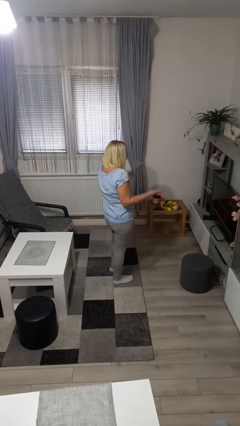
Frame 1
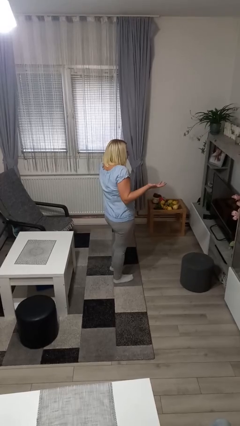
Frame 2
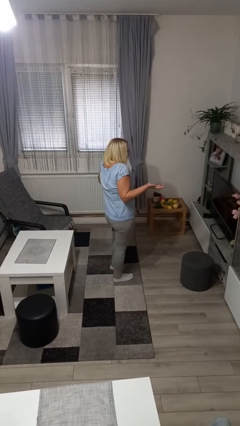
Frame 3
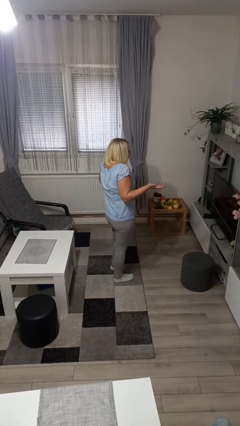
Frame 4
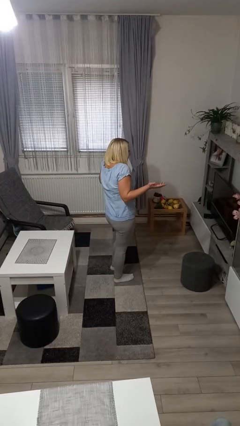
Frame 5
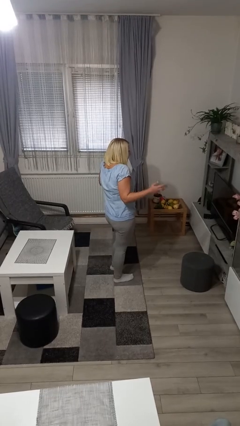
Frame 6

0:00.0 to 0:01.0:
person shrugs

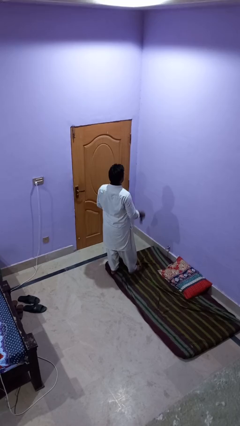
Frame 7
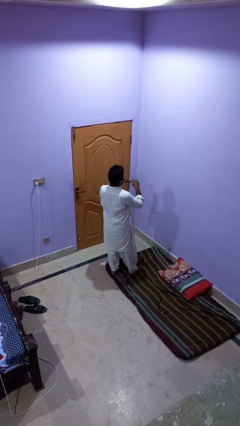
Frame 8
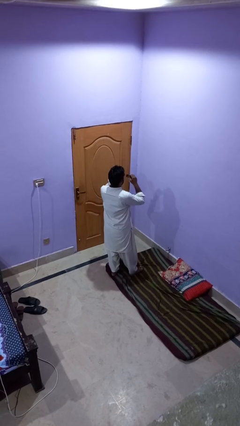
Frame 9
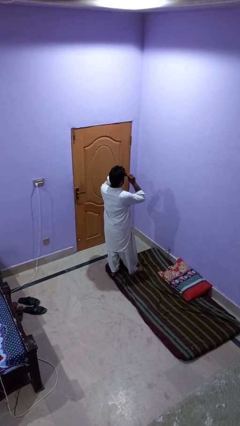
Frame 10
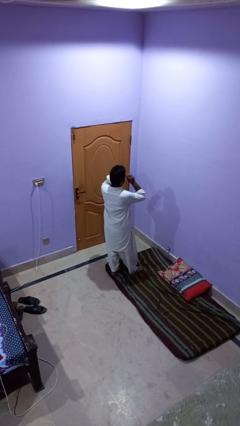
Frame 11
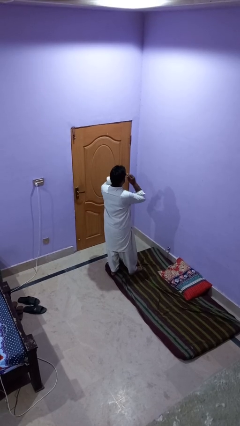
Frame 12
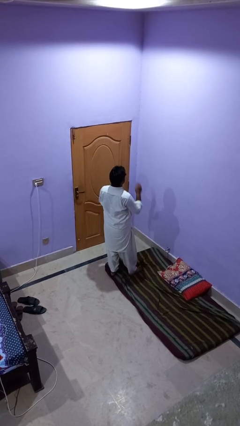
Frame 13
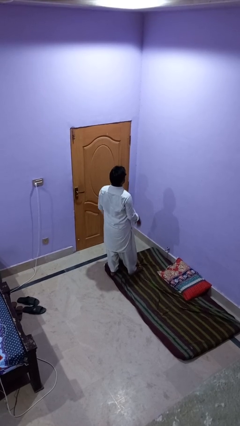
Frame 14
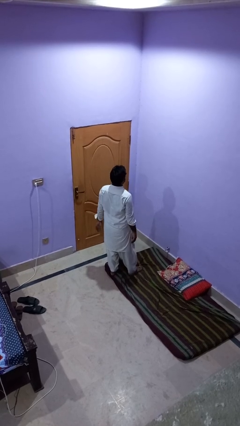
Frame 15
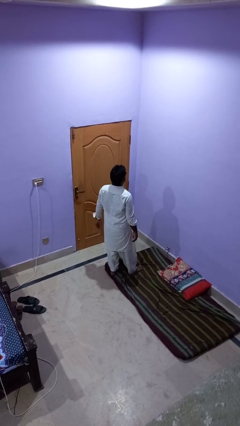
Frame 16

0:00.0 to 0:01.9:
person puts on sunglasses

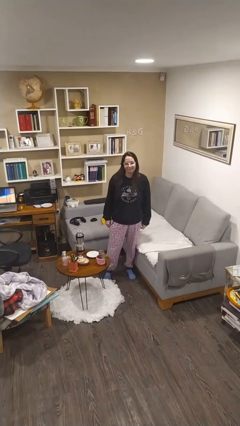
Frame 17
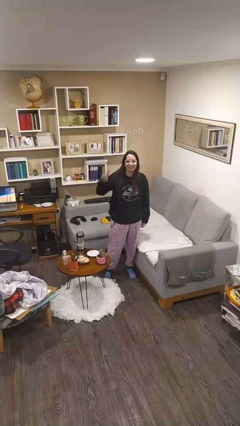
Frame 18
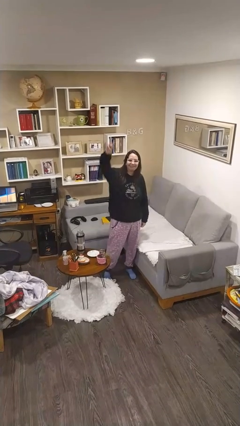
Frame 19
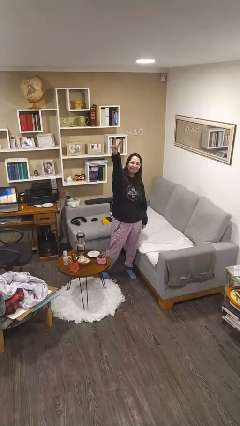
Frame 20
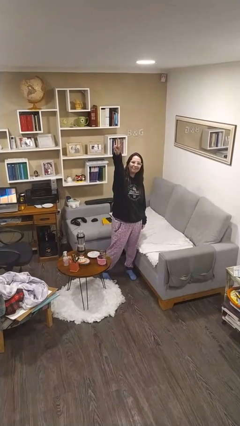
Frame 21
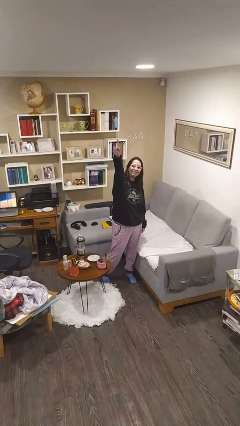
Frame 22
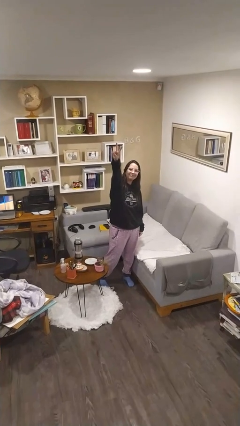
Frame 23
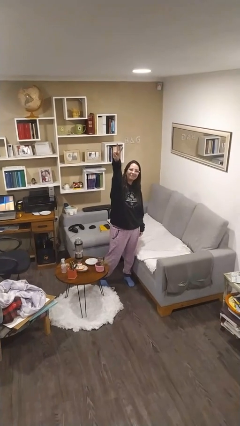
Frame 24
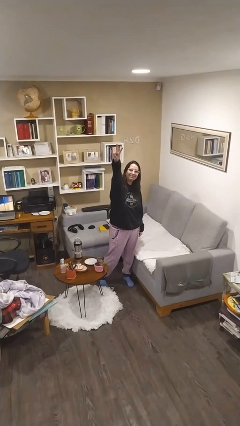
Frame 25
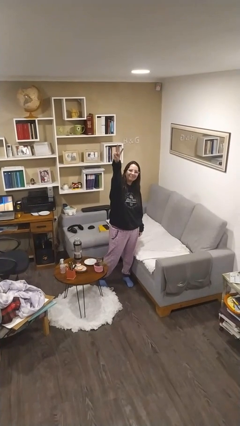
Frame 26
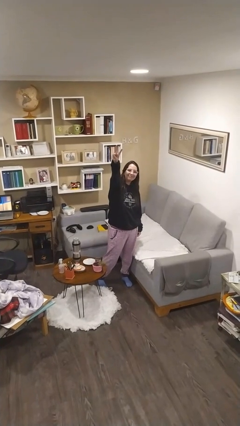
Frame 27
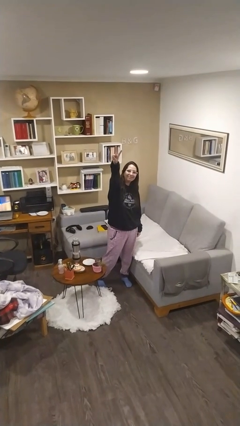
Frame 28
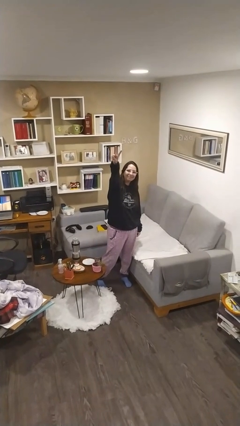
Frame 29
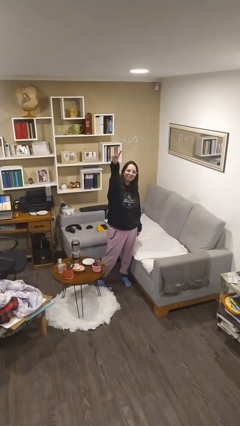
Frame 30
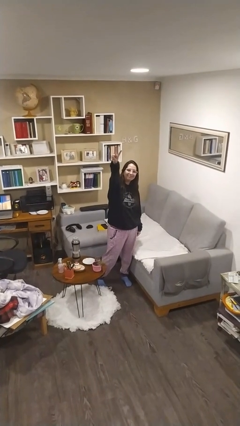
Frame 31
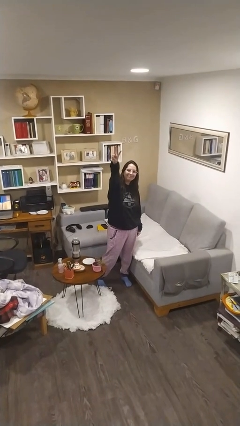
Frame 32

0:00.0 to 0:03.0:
person gestures peace

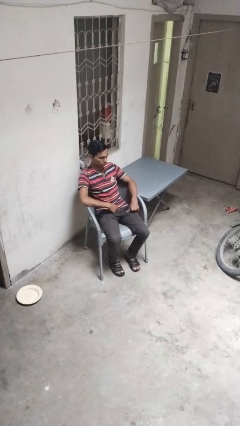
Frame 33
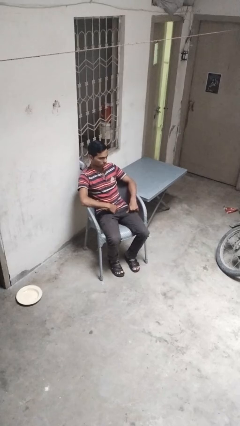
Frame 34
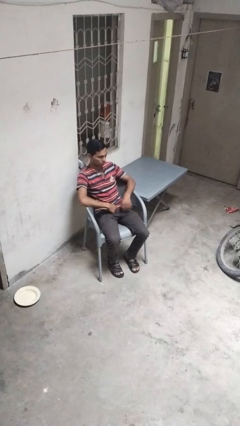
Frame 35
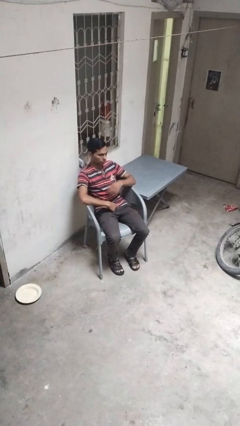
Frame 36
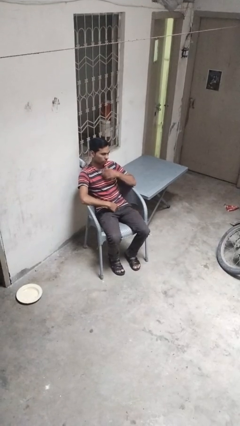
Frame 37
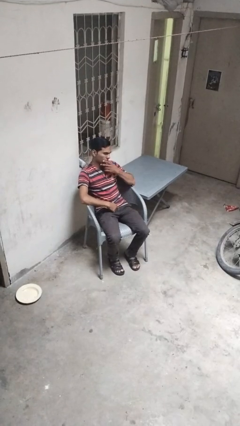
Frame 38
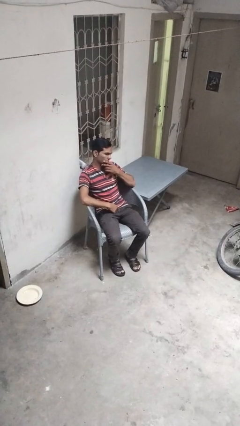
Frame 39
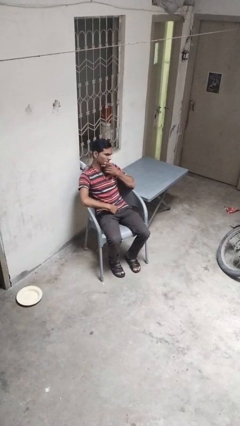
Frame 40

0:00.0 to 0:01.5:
person strokes chin

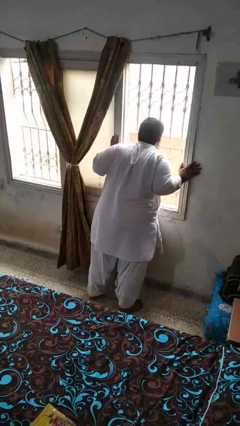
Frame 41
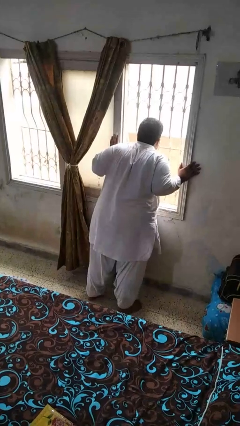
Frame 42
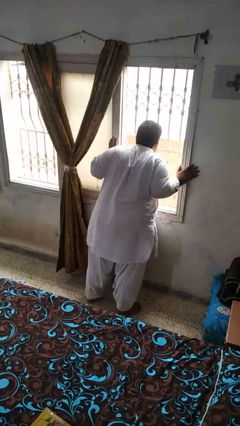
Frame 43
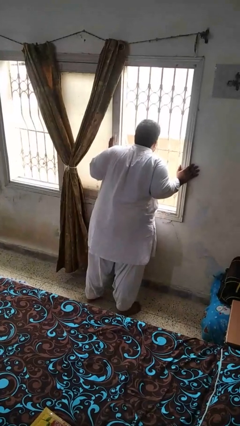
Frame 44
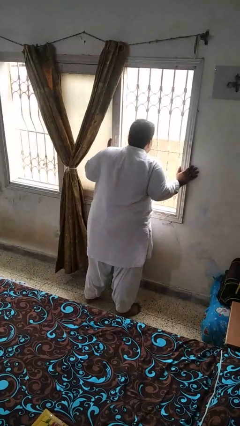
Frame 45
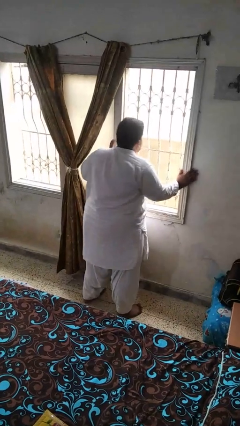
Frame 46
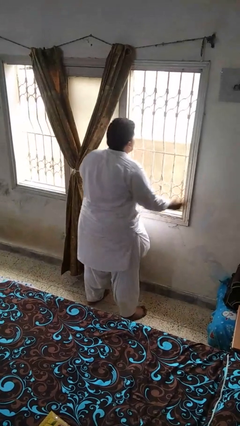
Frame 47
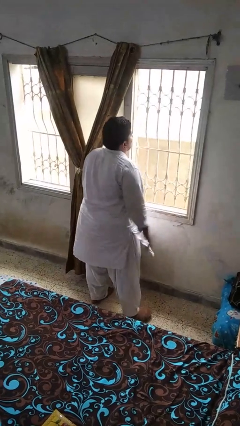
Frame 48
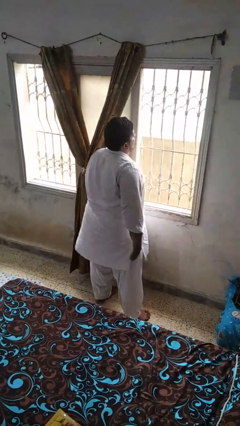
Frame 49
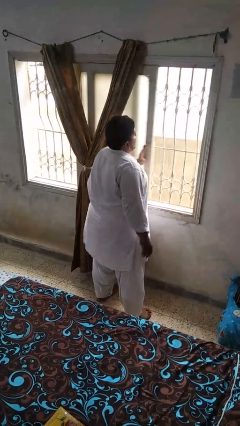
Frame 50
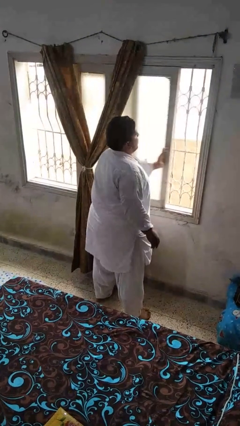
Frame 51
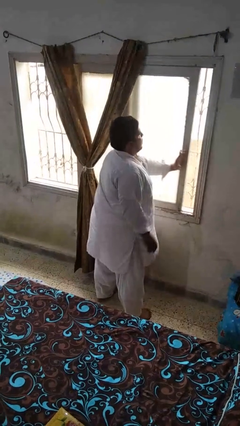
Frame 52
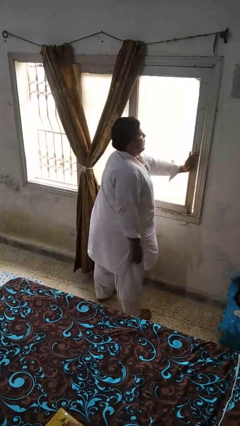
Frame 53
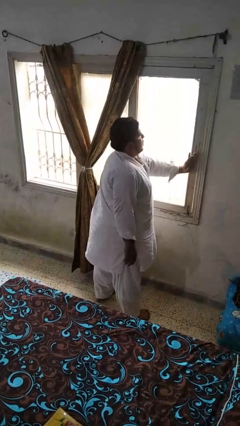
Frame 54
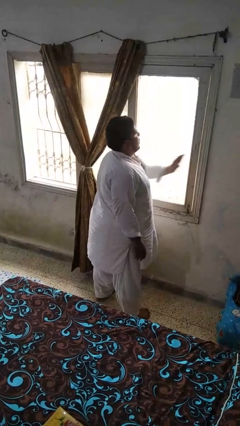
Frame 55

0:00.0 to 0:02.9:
person closes home window

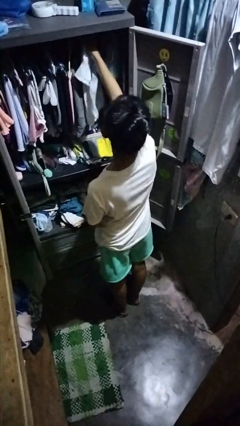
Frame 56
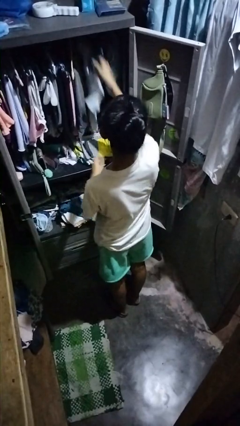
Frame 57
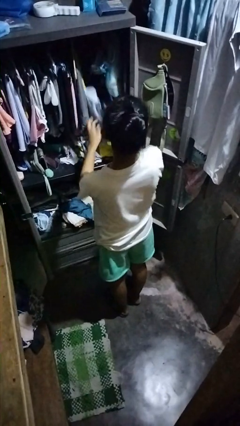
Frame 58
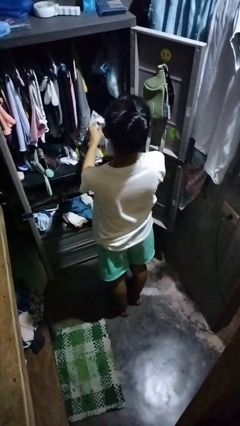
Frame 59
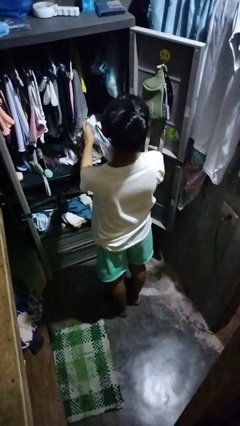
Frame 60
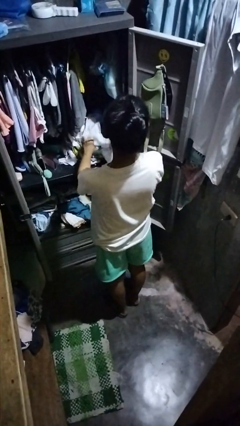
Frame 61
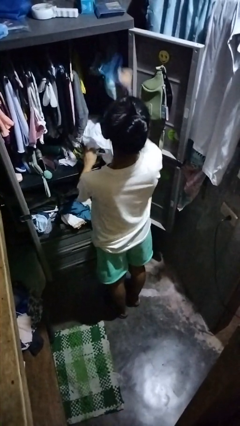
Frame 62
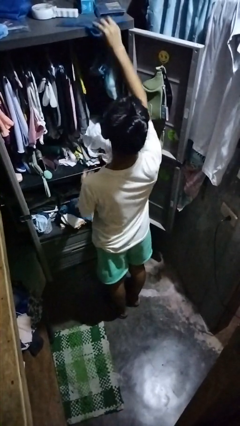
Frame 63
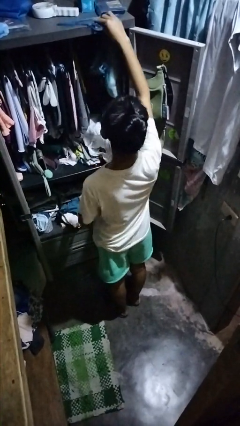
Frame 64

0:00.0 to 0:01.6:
person takes clothes from closet

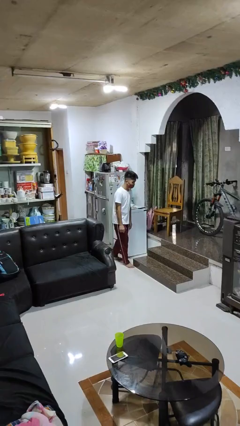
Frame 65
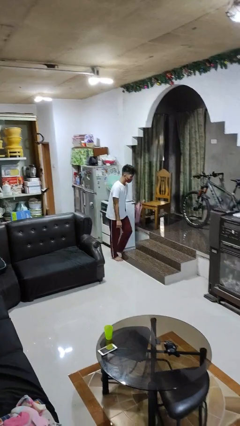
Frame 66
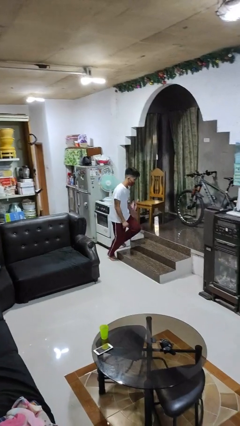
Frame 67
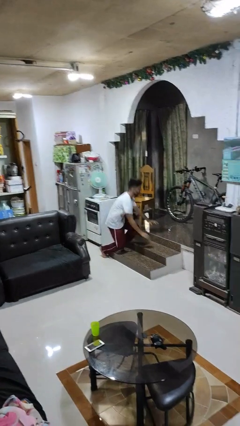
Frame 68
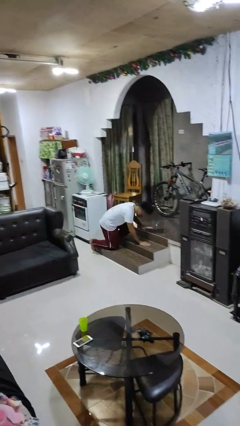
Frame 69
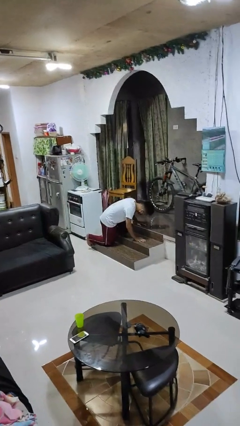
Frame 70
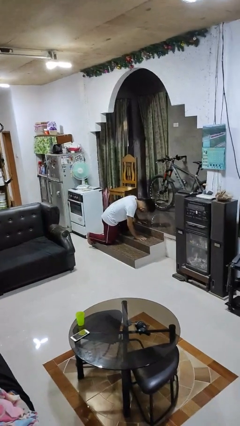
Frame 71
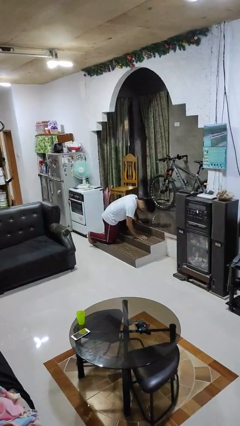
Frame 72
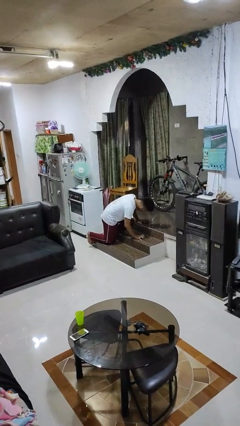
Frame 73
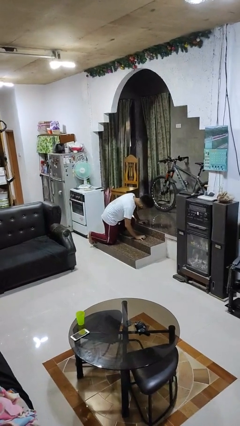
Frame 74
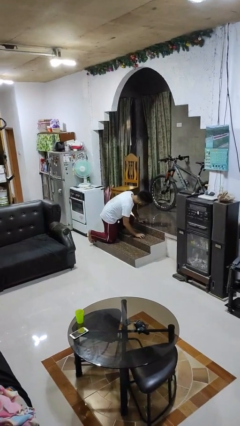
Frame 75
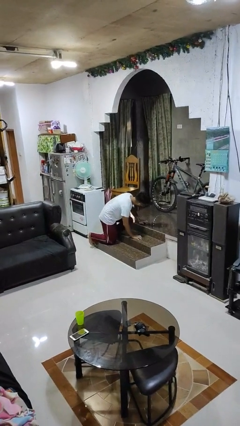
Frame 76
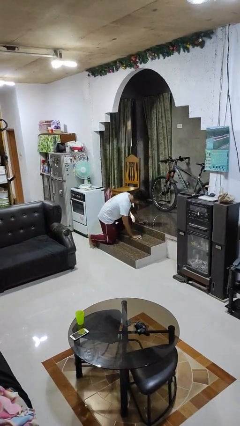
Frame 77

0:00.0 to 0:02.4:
person trips on object on floor

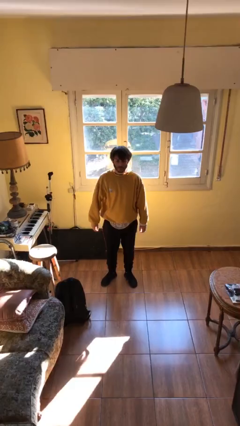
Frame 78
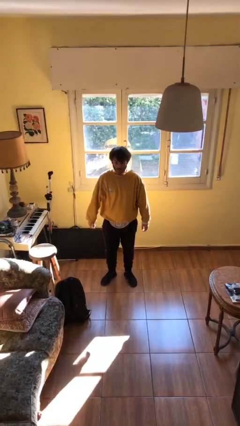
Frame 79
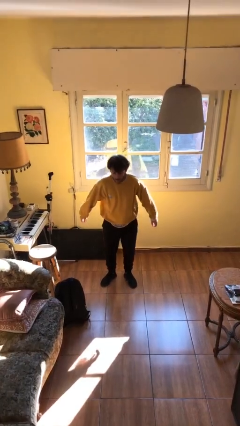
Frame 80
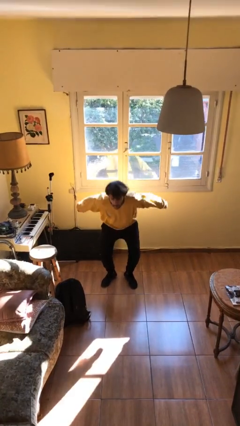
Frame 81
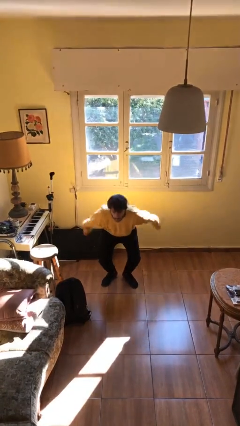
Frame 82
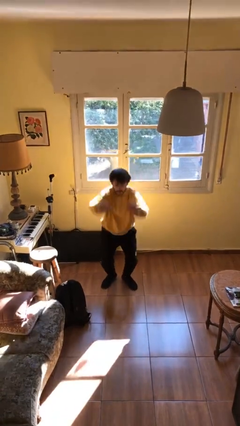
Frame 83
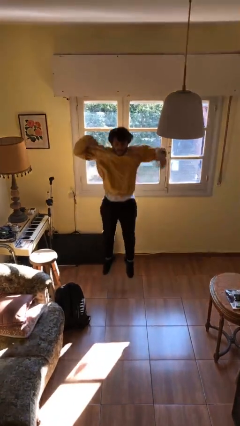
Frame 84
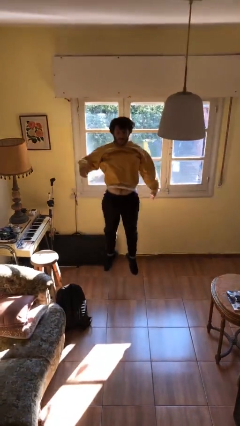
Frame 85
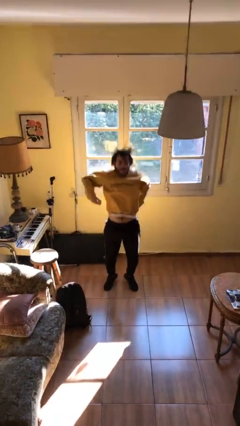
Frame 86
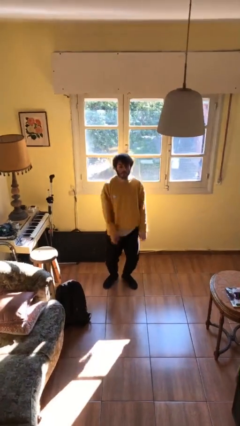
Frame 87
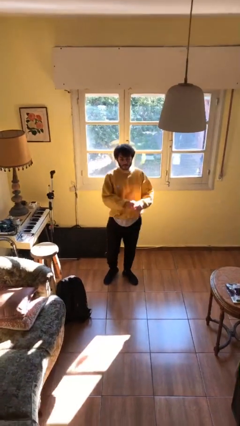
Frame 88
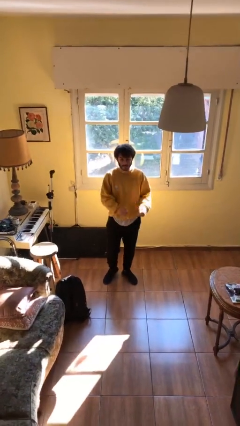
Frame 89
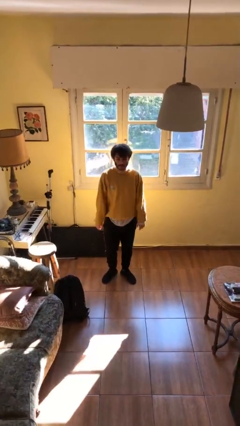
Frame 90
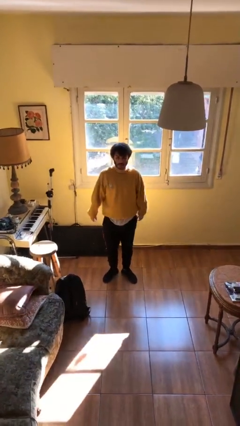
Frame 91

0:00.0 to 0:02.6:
person jumps

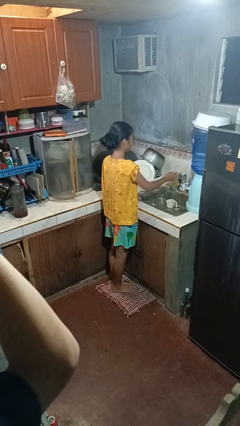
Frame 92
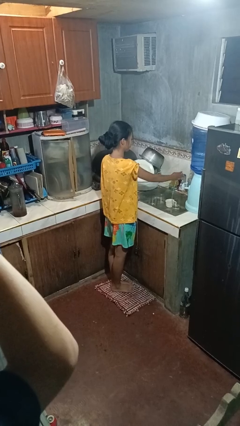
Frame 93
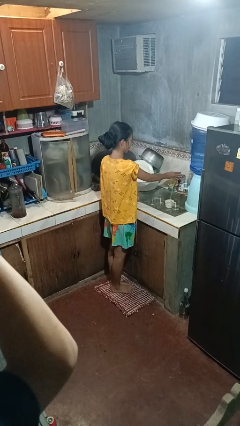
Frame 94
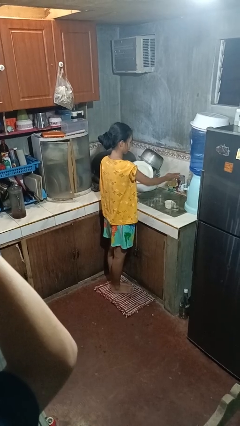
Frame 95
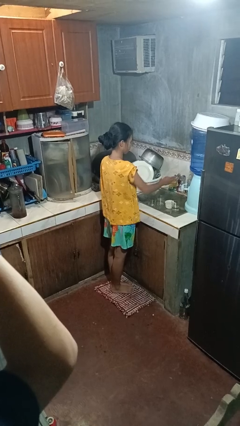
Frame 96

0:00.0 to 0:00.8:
person turns off faucet
